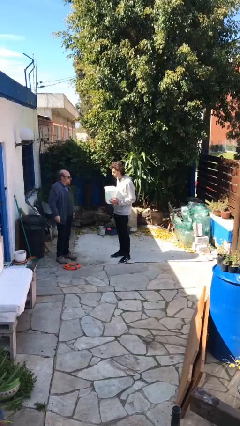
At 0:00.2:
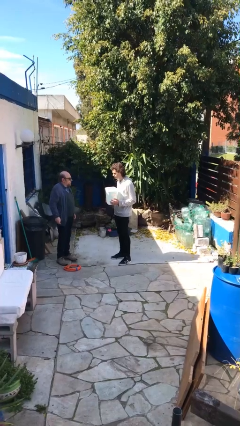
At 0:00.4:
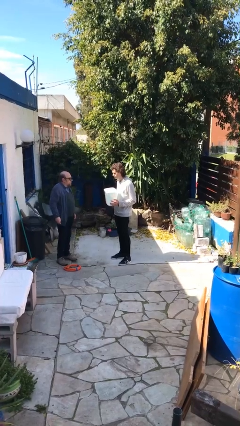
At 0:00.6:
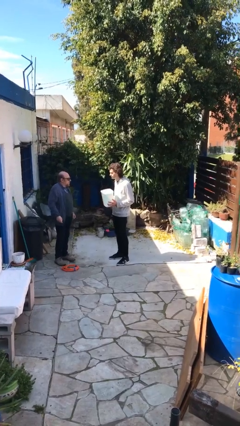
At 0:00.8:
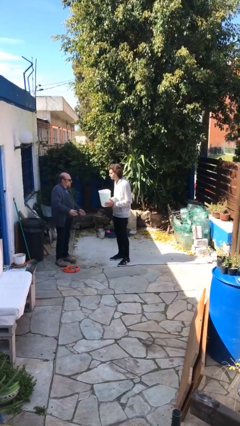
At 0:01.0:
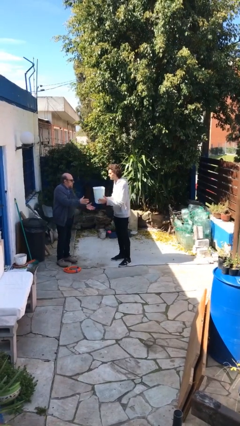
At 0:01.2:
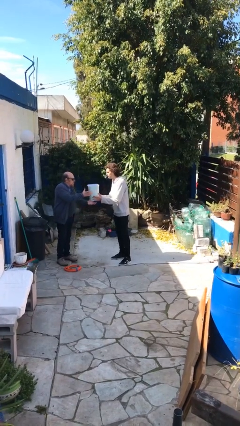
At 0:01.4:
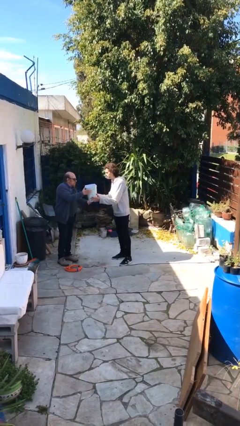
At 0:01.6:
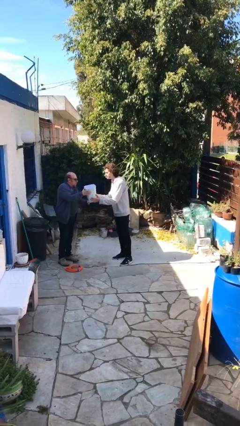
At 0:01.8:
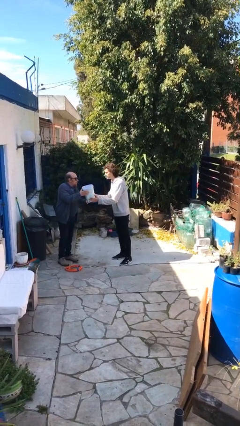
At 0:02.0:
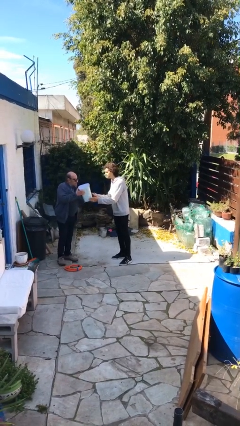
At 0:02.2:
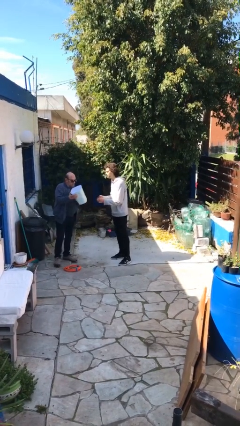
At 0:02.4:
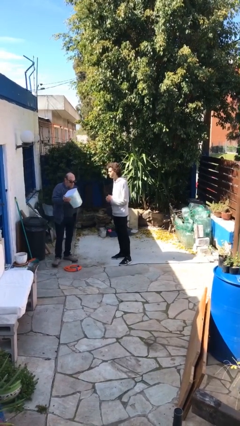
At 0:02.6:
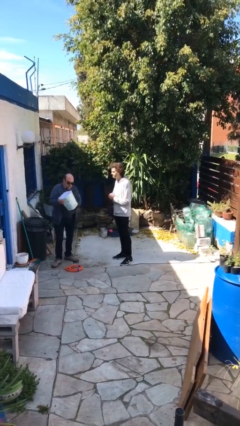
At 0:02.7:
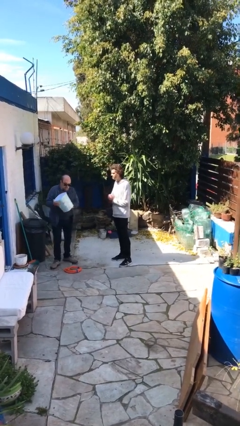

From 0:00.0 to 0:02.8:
person transfers object to person

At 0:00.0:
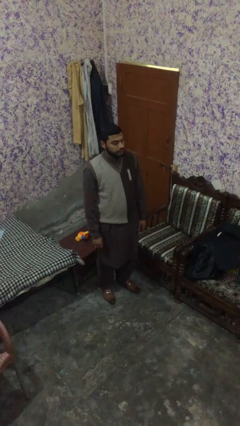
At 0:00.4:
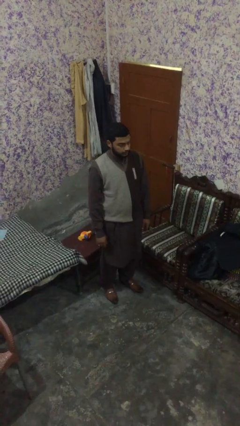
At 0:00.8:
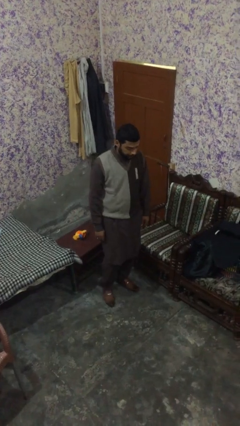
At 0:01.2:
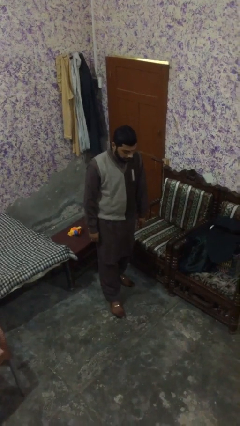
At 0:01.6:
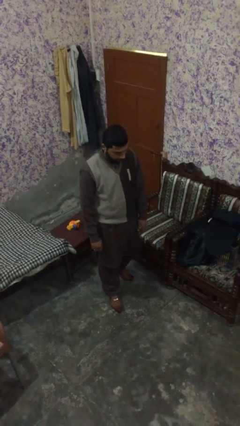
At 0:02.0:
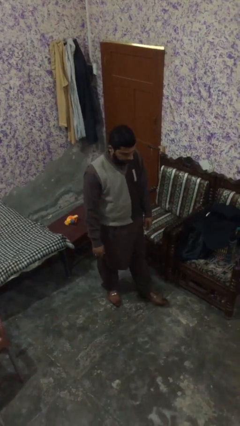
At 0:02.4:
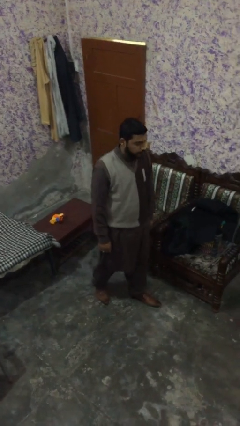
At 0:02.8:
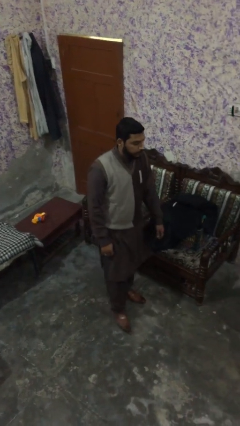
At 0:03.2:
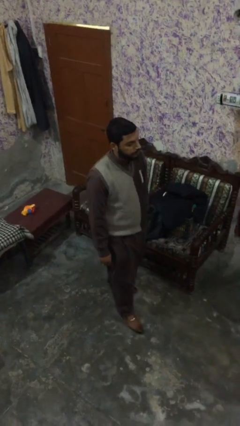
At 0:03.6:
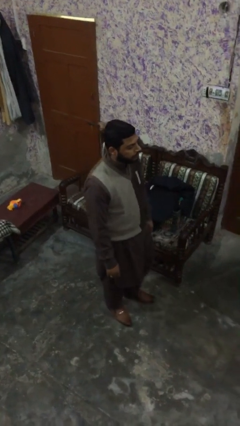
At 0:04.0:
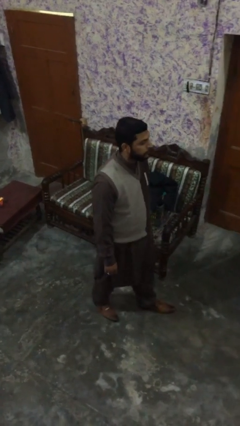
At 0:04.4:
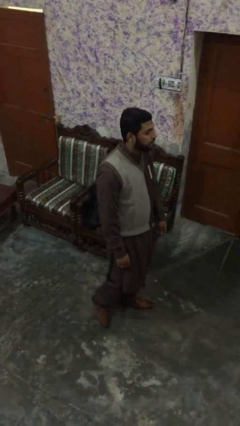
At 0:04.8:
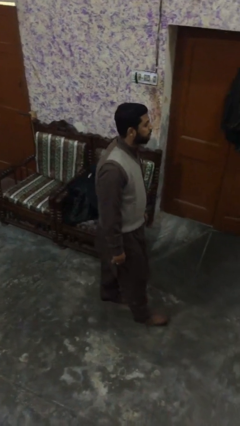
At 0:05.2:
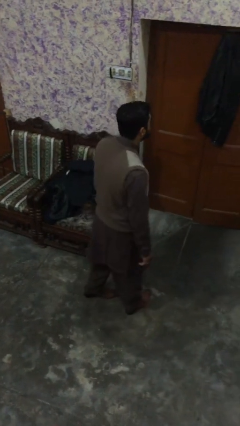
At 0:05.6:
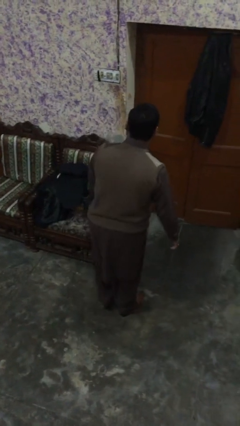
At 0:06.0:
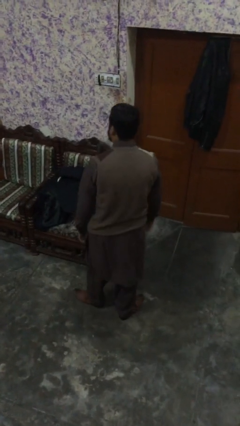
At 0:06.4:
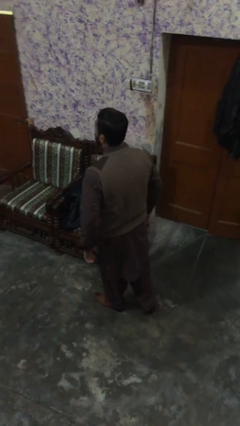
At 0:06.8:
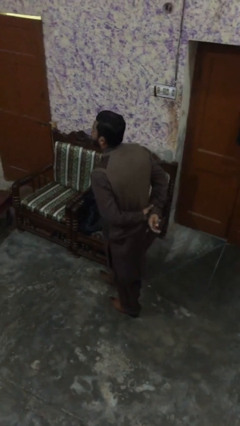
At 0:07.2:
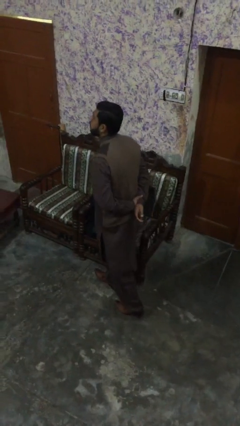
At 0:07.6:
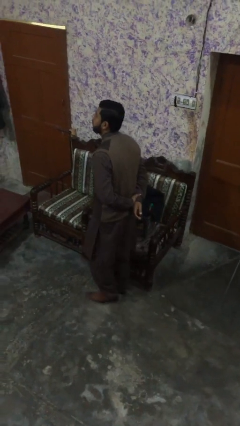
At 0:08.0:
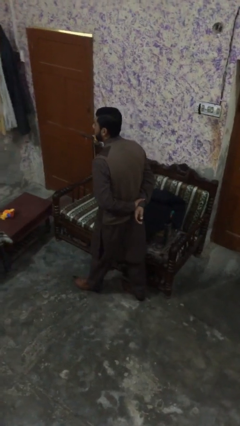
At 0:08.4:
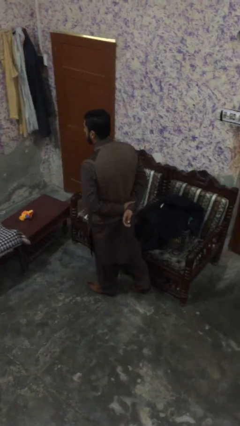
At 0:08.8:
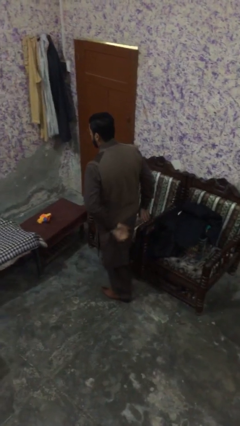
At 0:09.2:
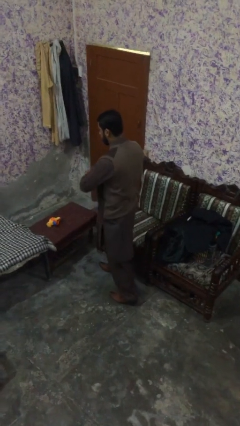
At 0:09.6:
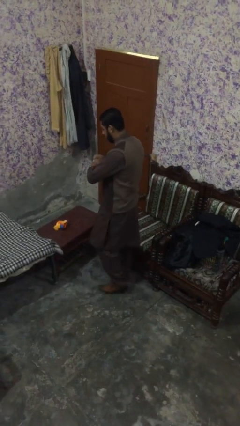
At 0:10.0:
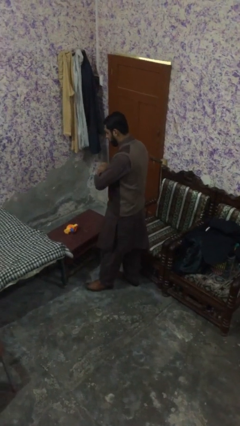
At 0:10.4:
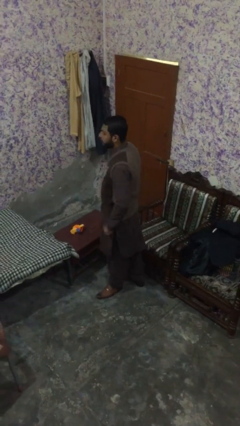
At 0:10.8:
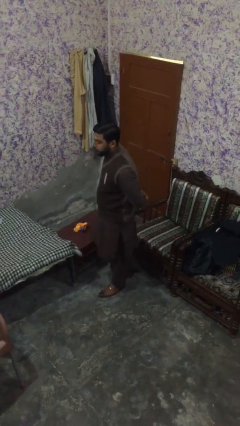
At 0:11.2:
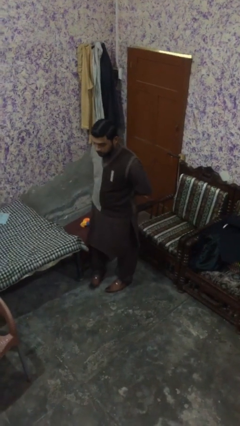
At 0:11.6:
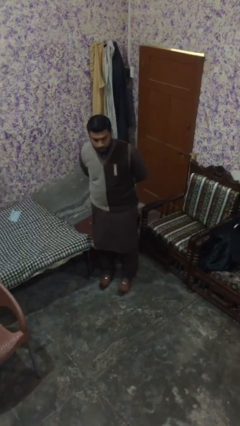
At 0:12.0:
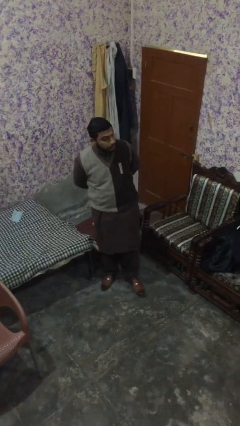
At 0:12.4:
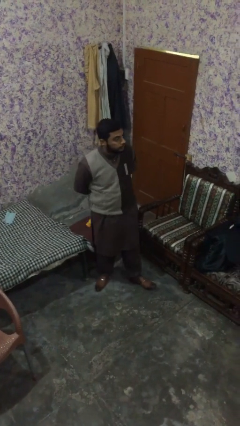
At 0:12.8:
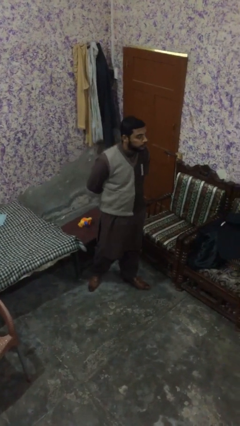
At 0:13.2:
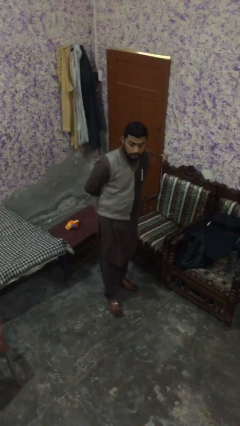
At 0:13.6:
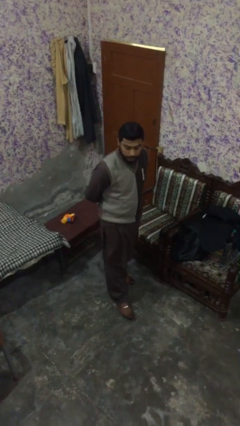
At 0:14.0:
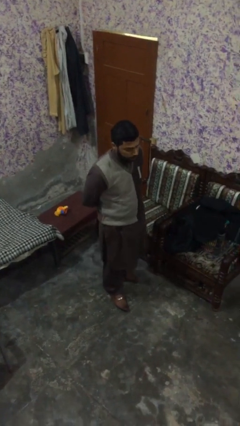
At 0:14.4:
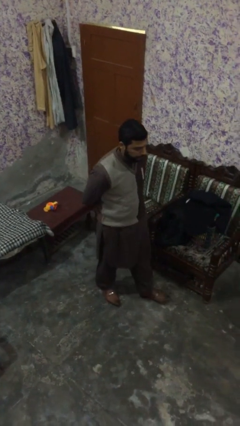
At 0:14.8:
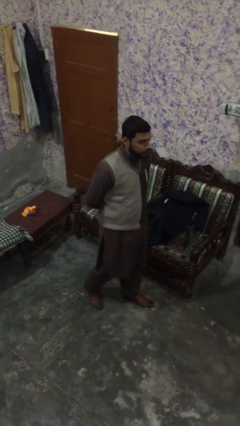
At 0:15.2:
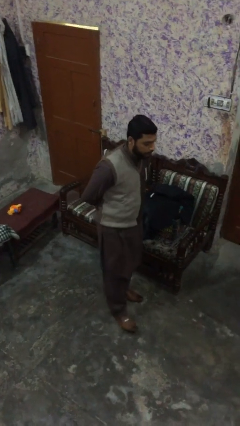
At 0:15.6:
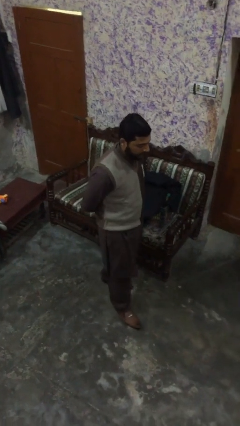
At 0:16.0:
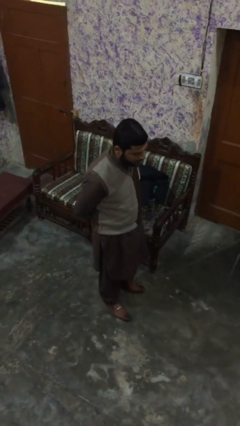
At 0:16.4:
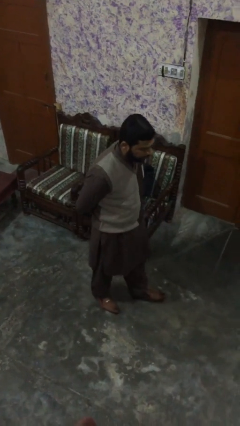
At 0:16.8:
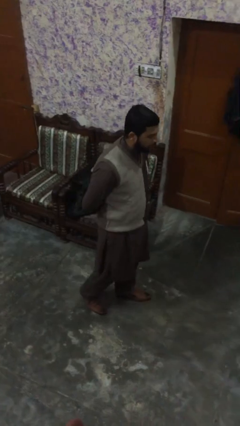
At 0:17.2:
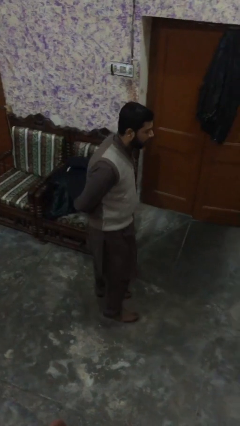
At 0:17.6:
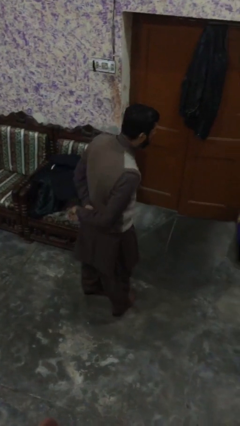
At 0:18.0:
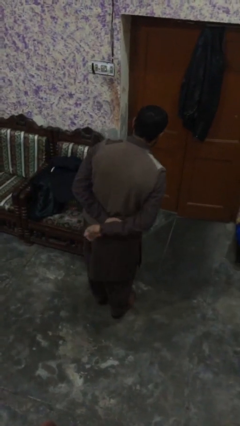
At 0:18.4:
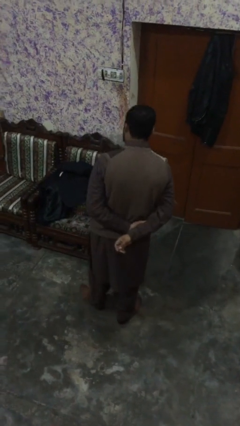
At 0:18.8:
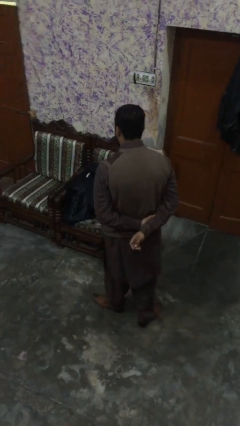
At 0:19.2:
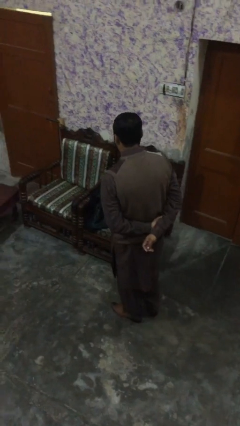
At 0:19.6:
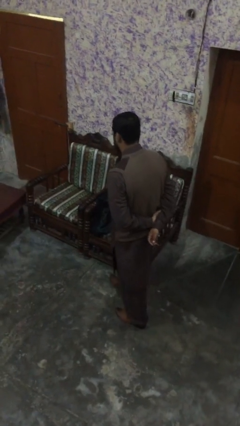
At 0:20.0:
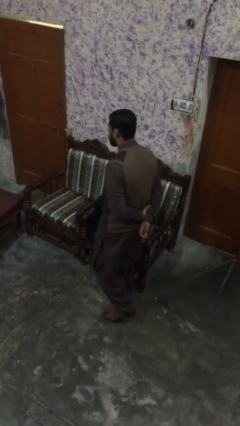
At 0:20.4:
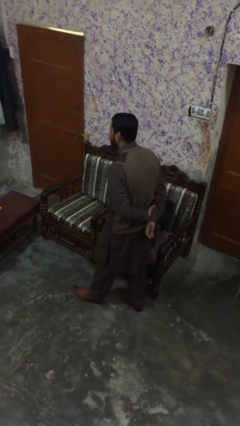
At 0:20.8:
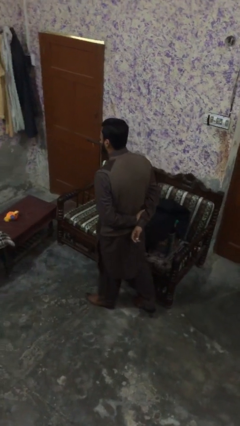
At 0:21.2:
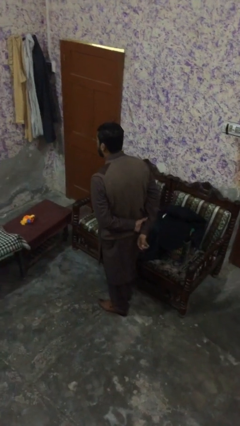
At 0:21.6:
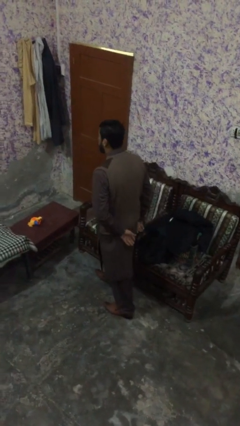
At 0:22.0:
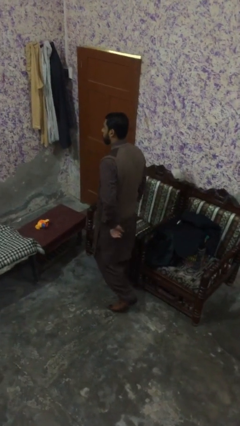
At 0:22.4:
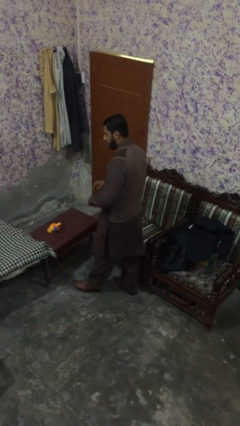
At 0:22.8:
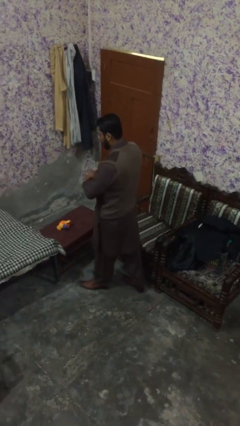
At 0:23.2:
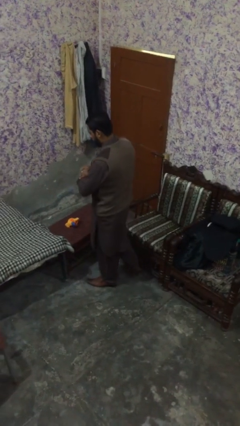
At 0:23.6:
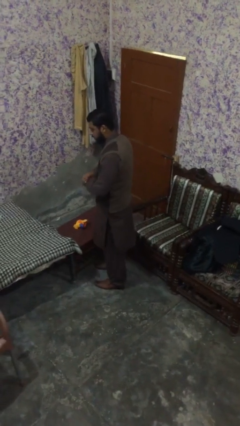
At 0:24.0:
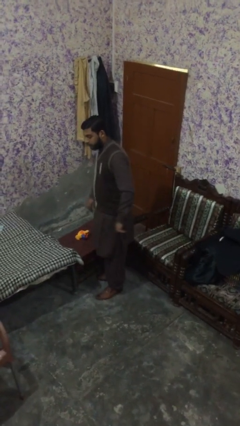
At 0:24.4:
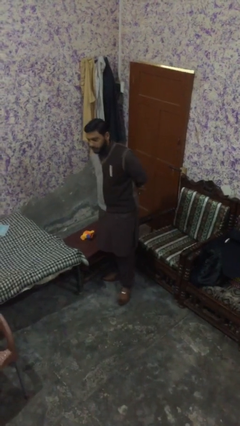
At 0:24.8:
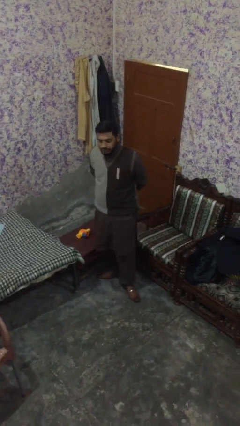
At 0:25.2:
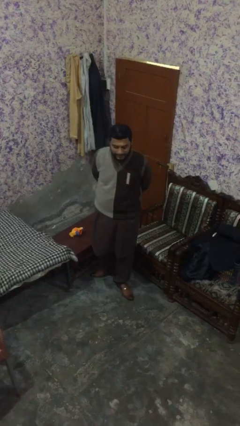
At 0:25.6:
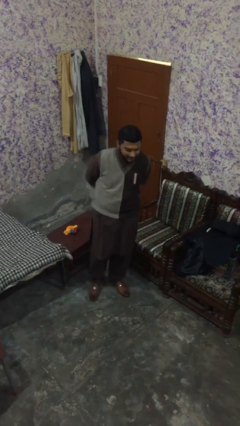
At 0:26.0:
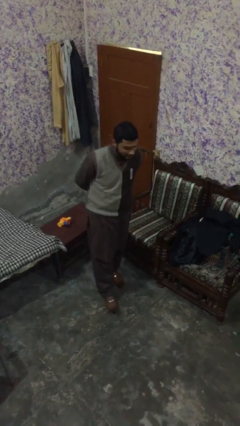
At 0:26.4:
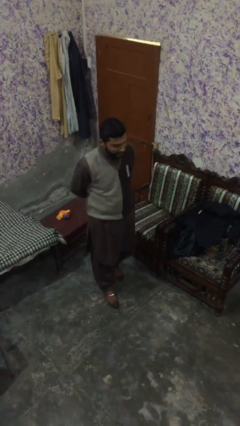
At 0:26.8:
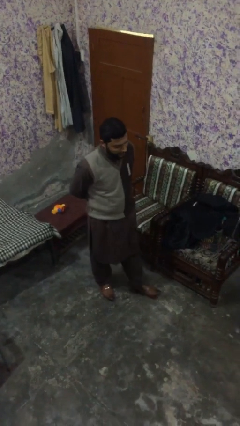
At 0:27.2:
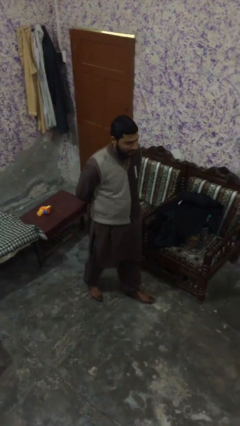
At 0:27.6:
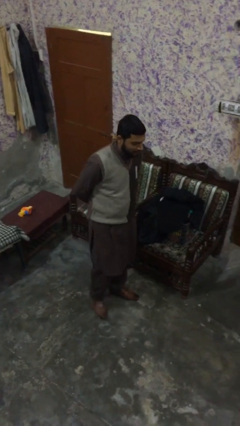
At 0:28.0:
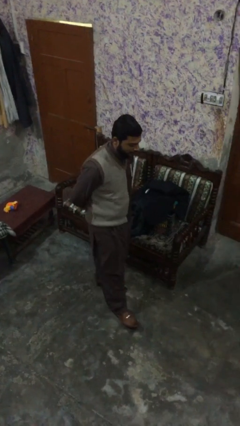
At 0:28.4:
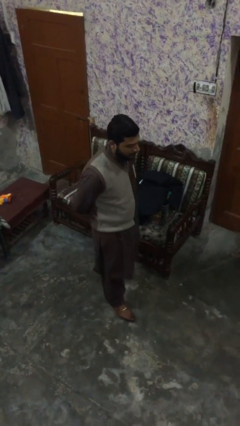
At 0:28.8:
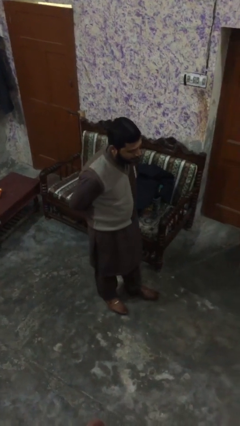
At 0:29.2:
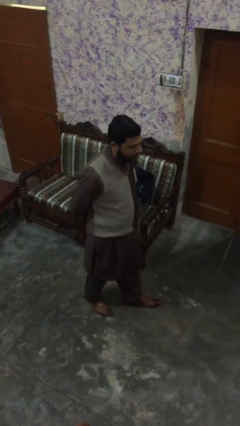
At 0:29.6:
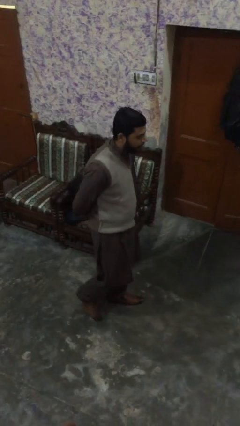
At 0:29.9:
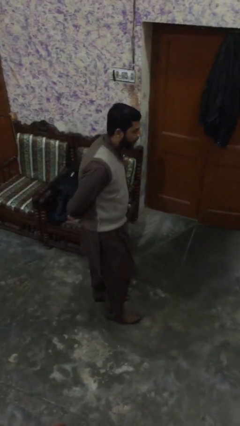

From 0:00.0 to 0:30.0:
person walks
